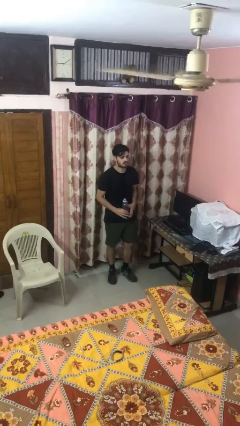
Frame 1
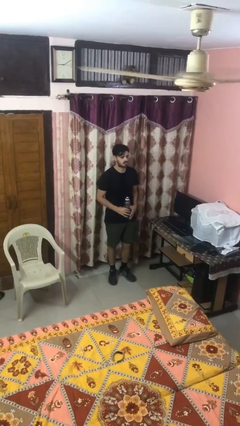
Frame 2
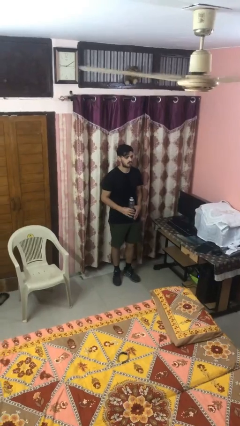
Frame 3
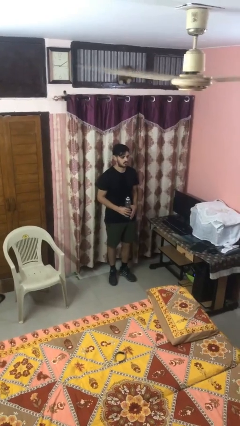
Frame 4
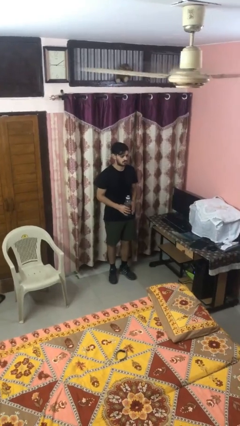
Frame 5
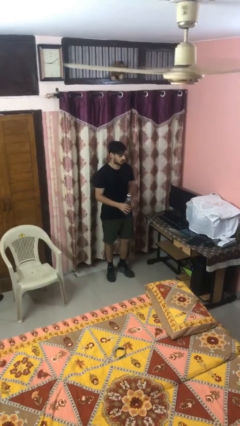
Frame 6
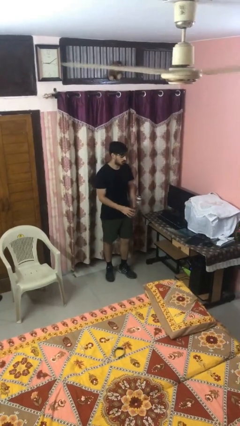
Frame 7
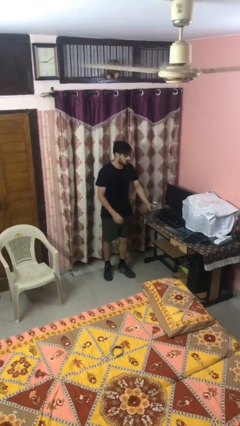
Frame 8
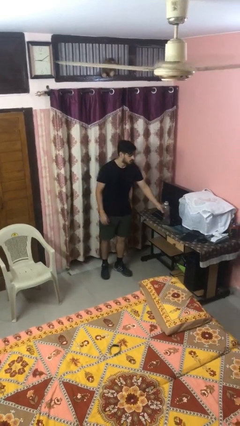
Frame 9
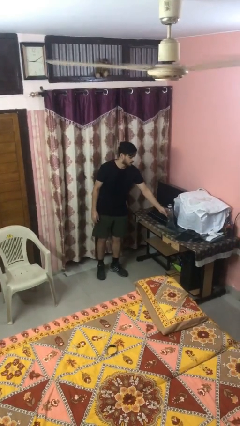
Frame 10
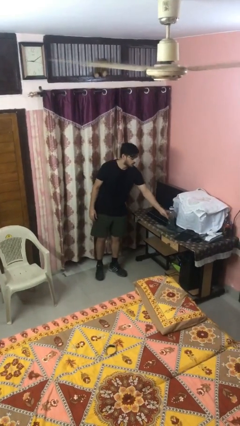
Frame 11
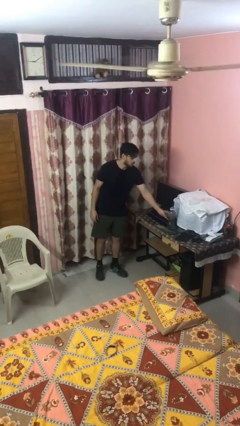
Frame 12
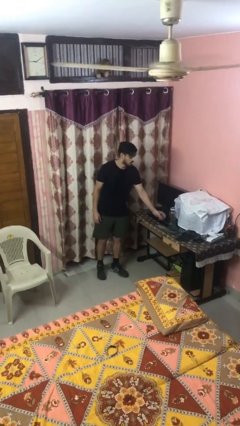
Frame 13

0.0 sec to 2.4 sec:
person puts down object on countertop

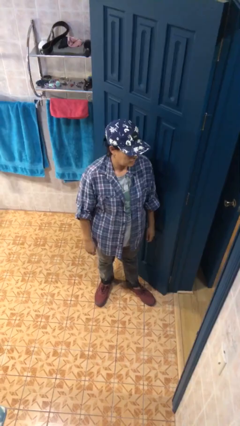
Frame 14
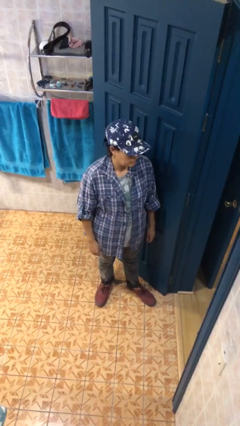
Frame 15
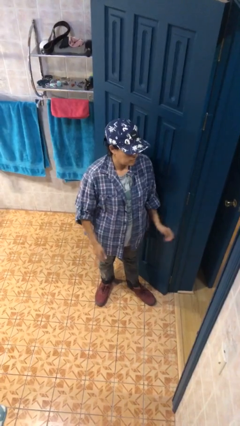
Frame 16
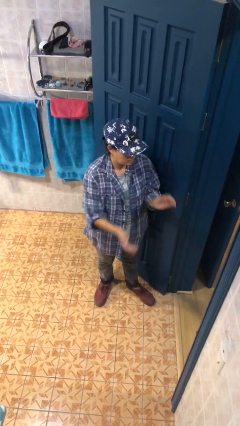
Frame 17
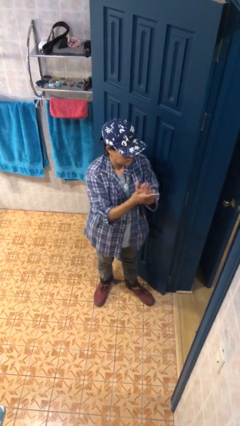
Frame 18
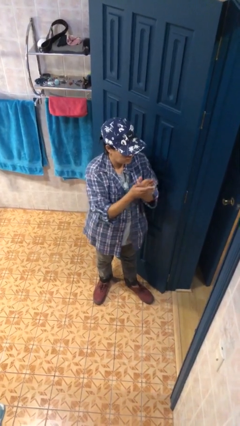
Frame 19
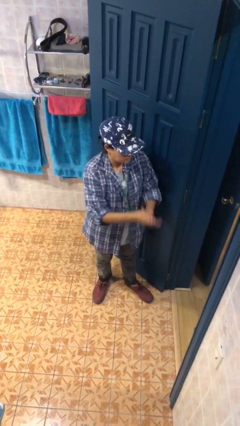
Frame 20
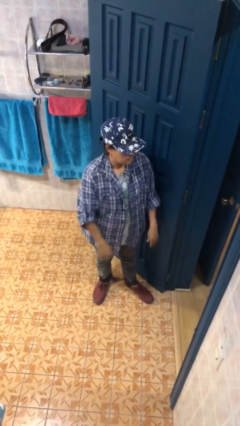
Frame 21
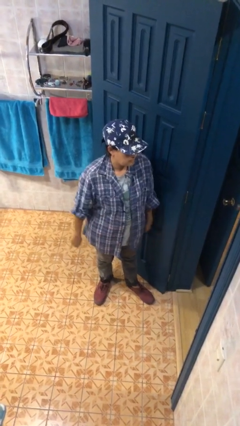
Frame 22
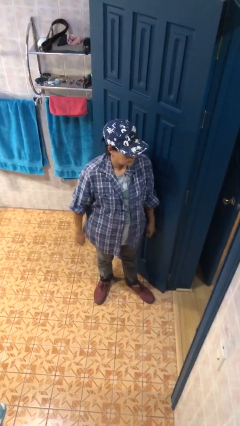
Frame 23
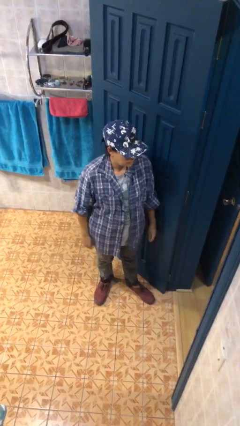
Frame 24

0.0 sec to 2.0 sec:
person claps hands

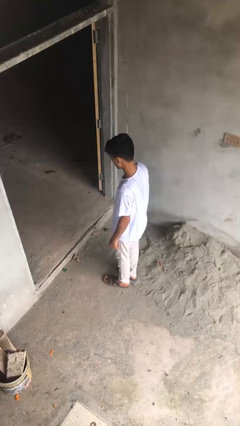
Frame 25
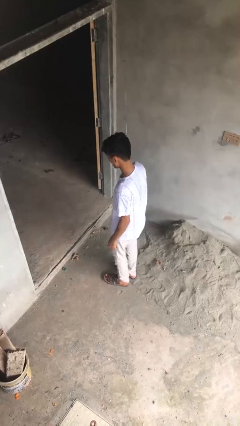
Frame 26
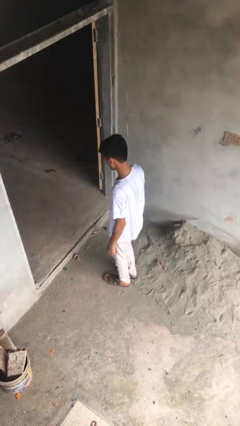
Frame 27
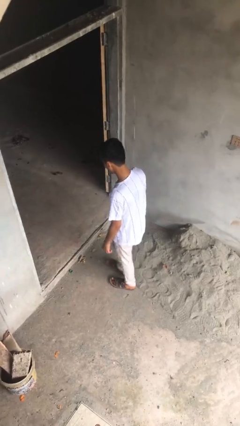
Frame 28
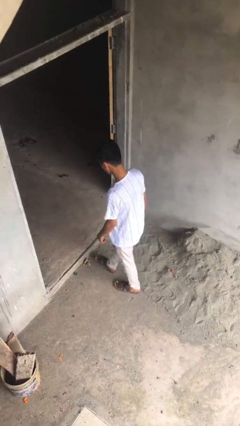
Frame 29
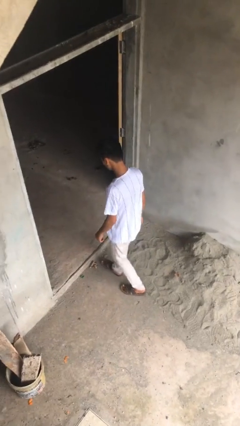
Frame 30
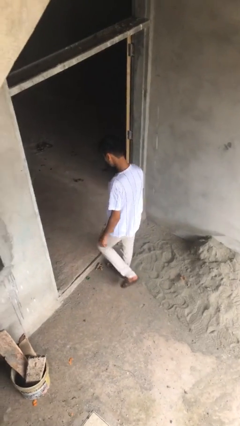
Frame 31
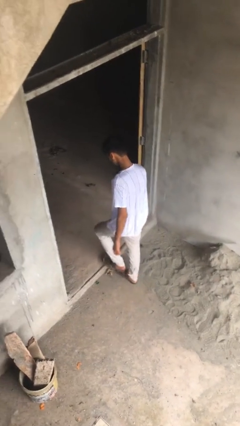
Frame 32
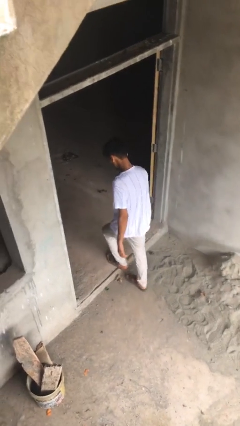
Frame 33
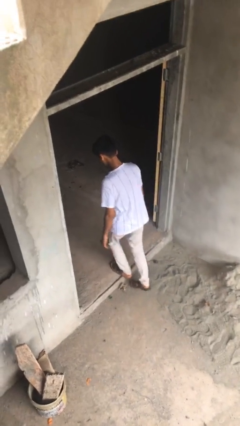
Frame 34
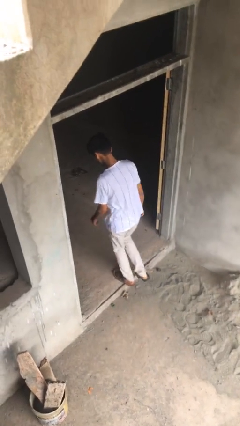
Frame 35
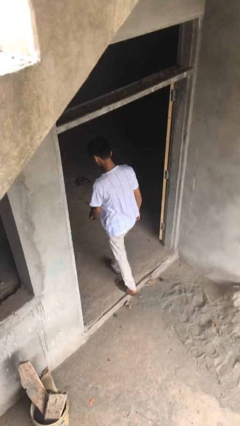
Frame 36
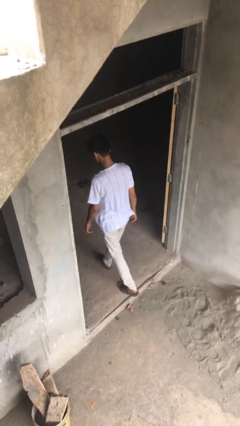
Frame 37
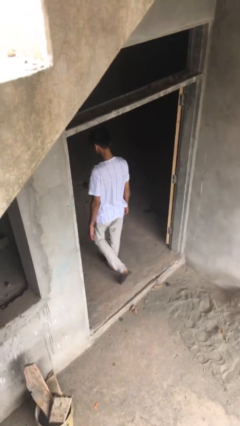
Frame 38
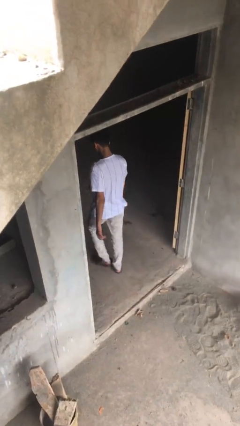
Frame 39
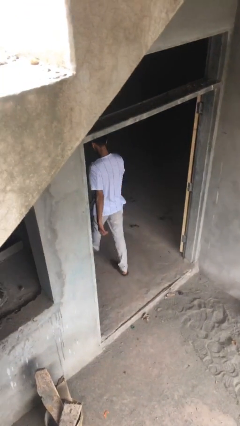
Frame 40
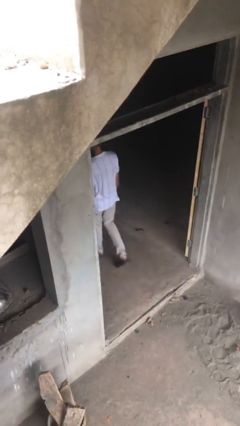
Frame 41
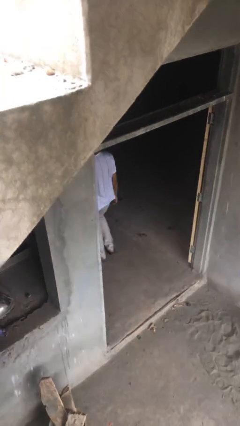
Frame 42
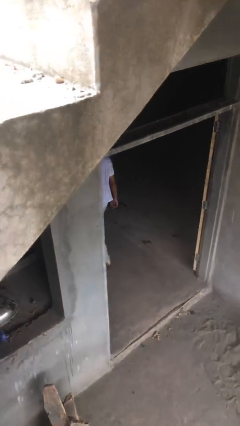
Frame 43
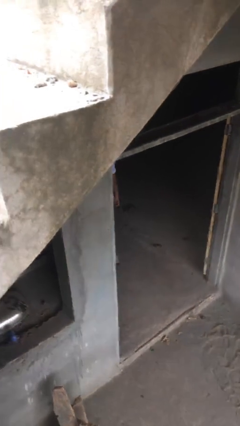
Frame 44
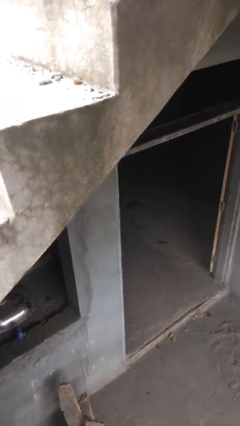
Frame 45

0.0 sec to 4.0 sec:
person exits scene through structure

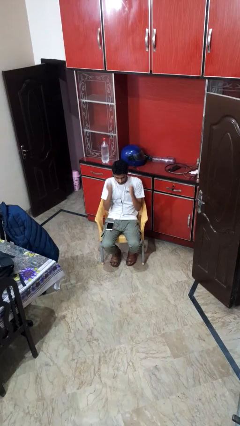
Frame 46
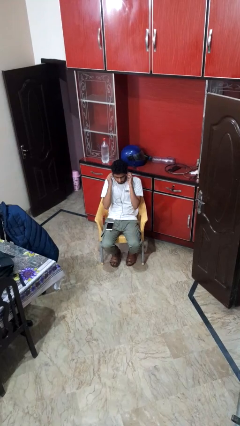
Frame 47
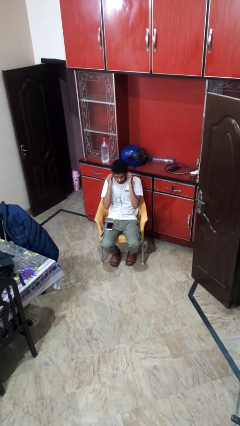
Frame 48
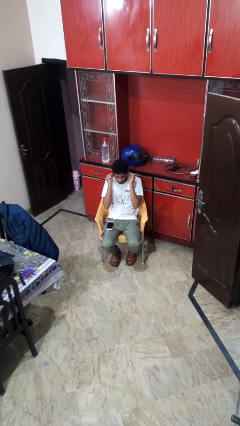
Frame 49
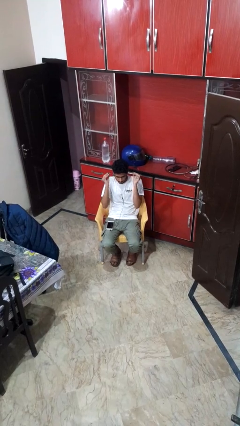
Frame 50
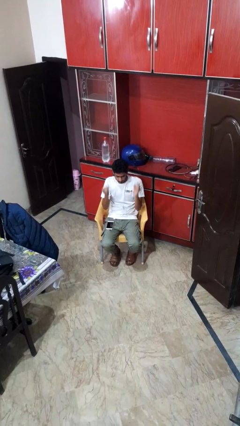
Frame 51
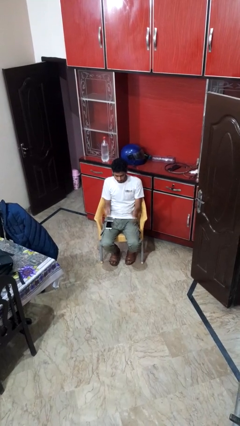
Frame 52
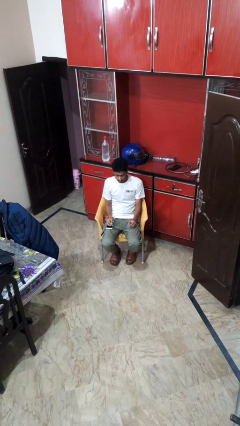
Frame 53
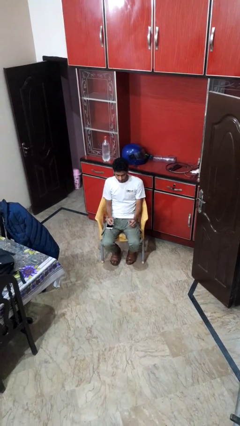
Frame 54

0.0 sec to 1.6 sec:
person takes off headphones

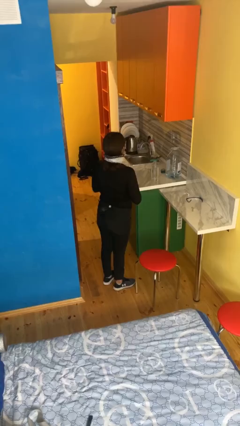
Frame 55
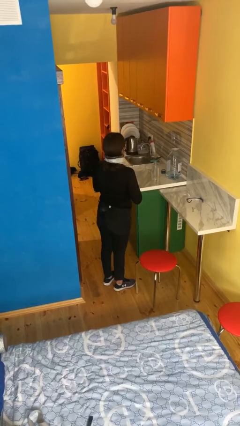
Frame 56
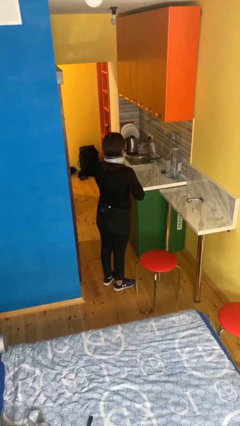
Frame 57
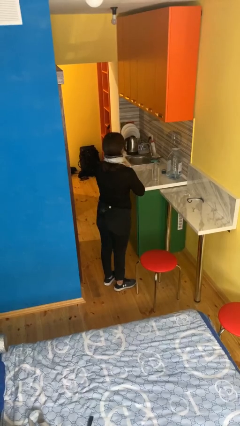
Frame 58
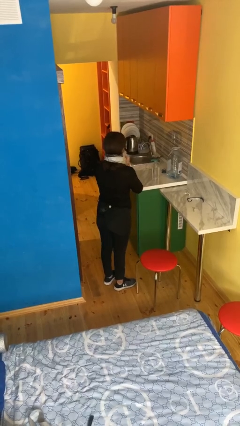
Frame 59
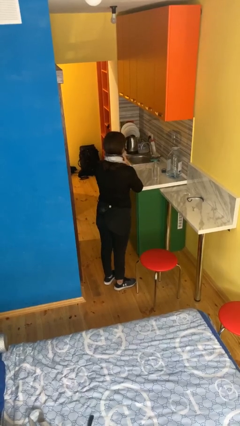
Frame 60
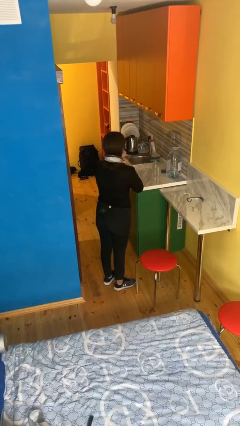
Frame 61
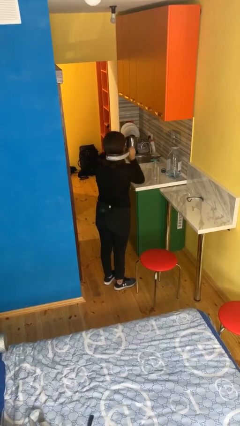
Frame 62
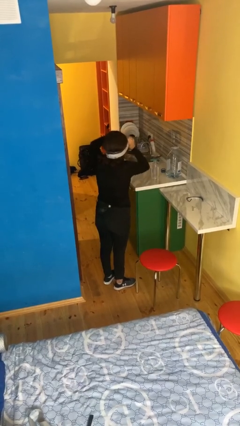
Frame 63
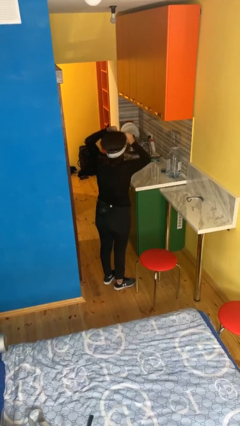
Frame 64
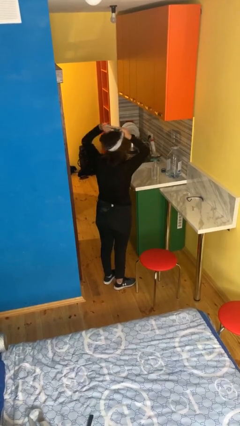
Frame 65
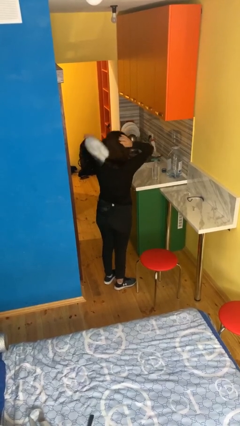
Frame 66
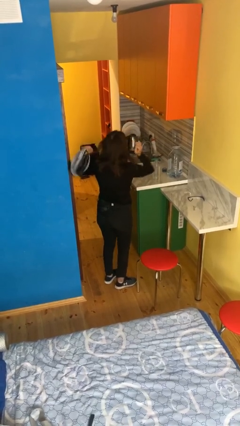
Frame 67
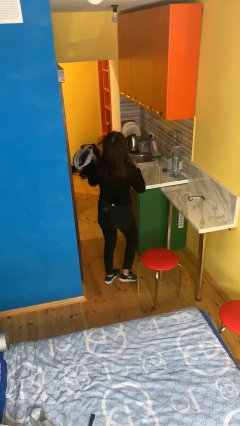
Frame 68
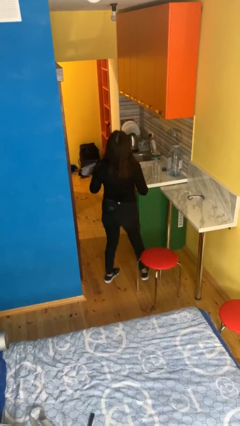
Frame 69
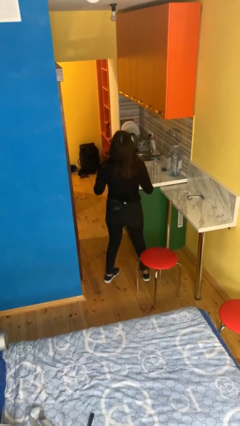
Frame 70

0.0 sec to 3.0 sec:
person takes off scarf

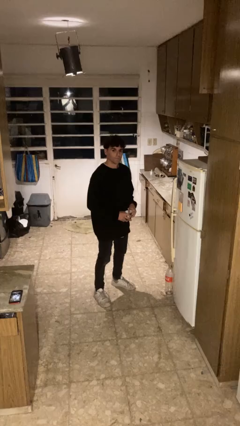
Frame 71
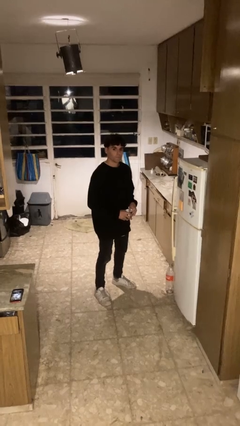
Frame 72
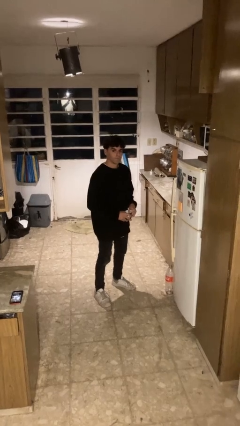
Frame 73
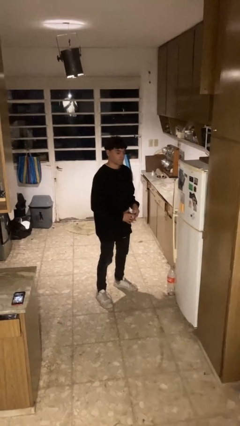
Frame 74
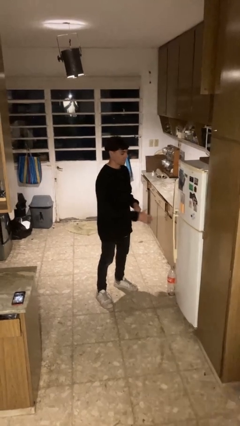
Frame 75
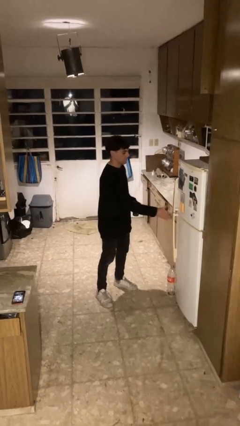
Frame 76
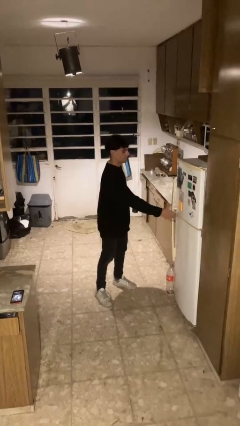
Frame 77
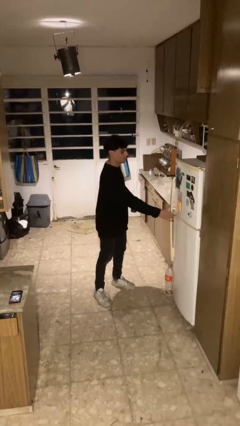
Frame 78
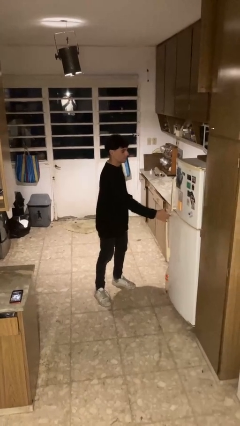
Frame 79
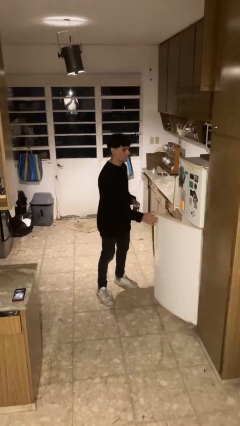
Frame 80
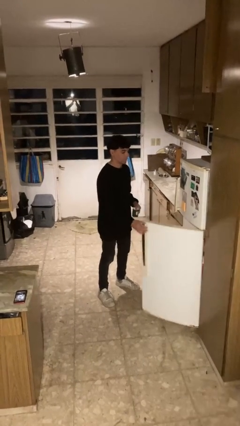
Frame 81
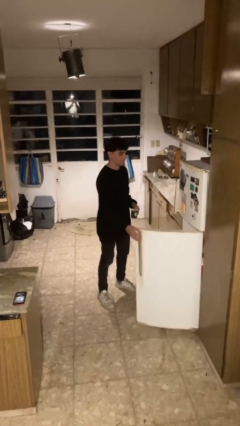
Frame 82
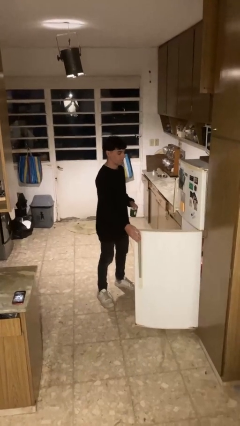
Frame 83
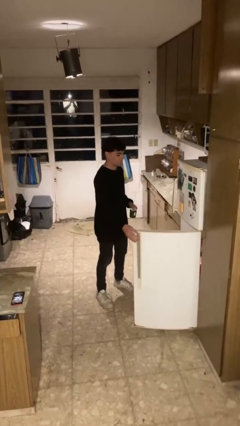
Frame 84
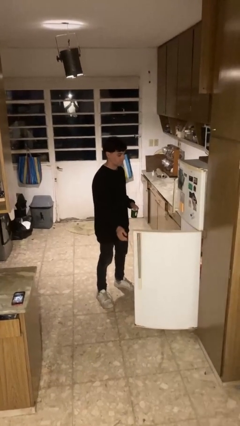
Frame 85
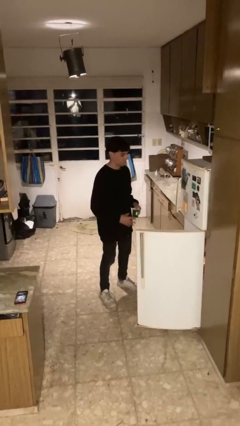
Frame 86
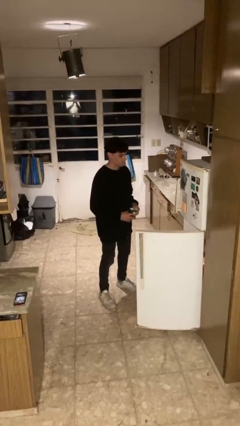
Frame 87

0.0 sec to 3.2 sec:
person opens refrigerator

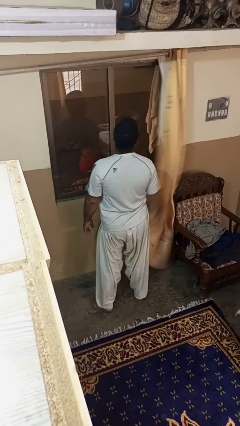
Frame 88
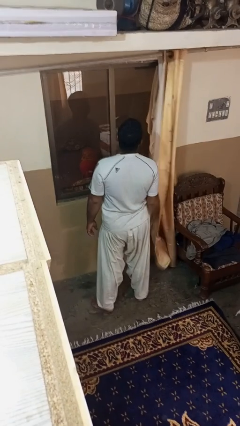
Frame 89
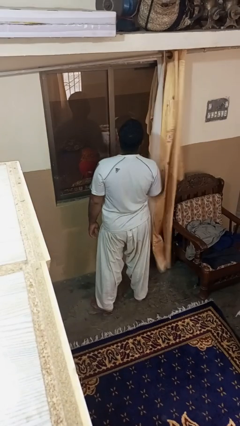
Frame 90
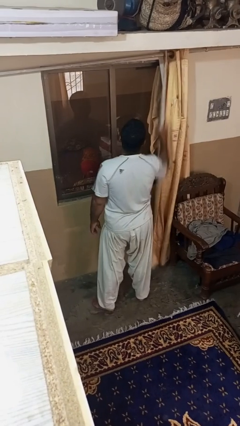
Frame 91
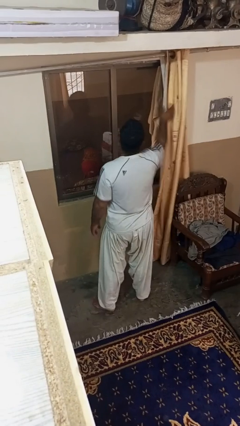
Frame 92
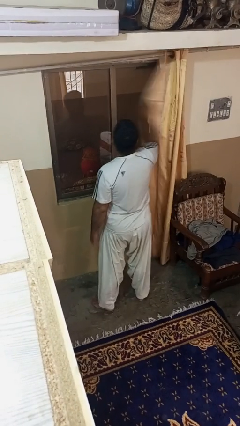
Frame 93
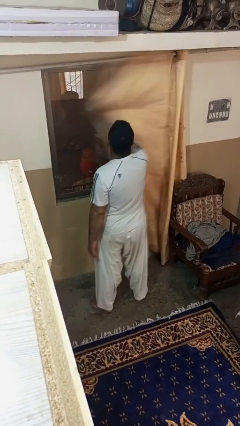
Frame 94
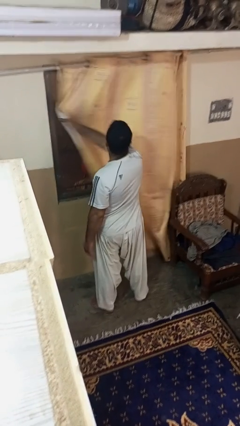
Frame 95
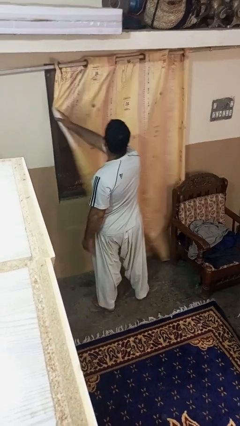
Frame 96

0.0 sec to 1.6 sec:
person closes curtains
